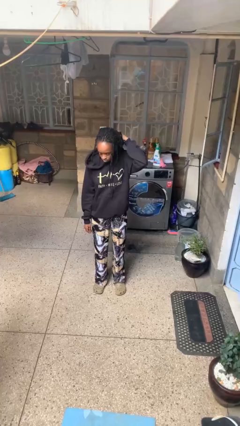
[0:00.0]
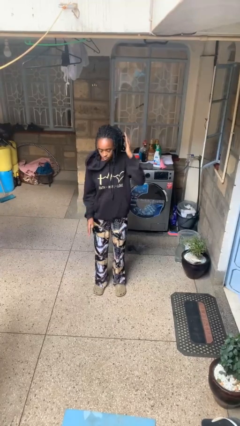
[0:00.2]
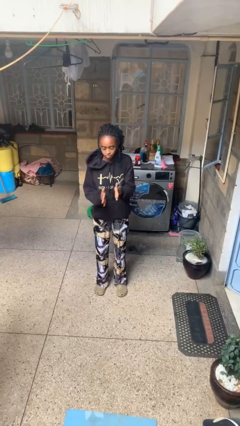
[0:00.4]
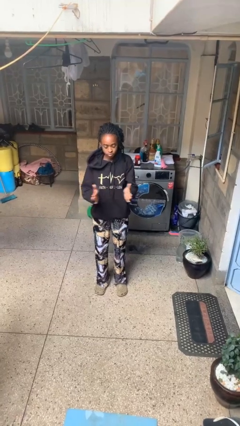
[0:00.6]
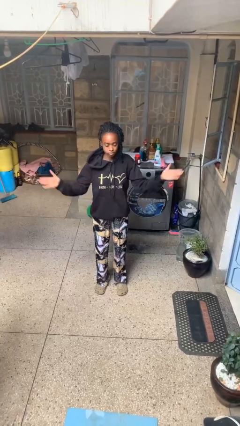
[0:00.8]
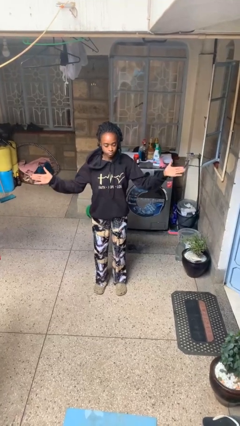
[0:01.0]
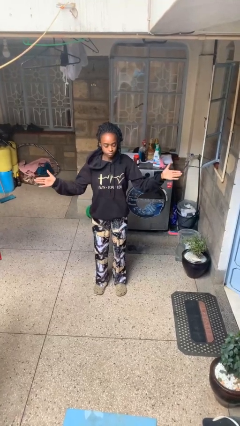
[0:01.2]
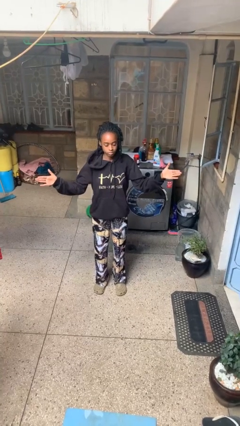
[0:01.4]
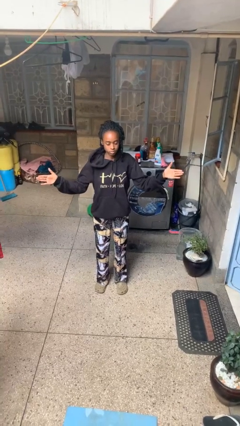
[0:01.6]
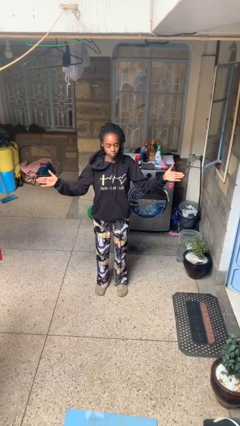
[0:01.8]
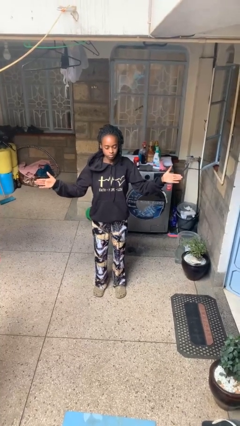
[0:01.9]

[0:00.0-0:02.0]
person gestures zoom in

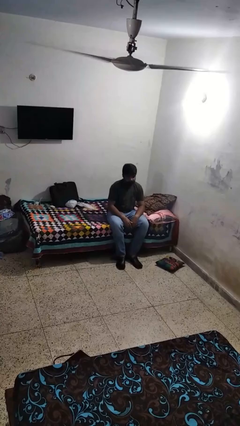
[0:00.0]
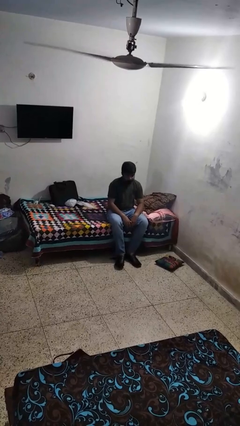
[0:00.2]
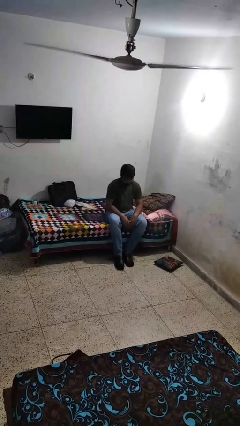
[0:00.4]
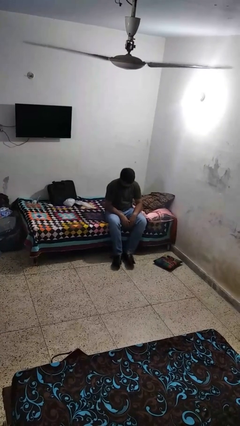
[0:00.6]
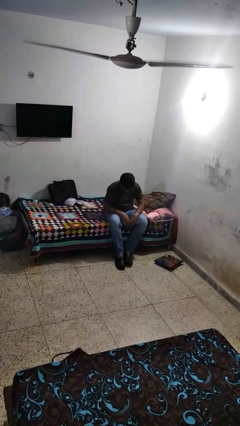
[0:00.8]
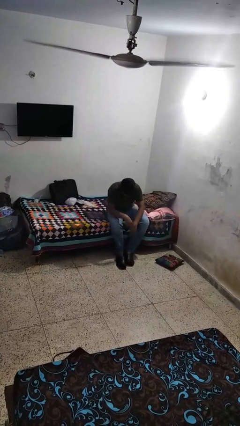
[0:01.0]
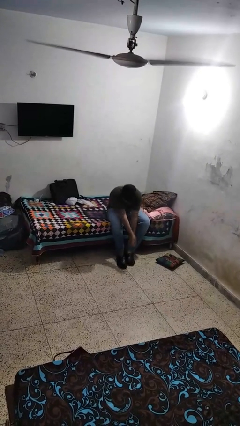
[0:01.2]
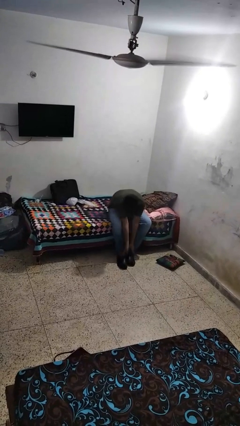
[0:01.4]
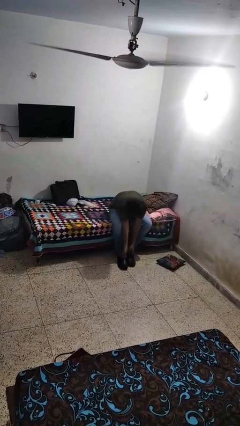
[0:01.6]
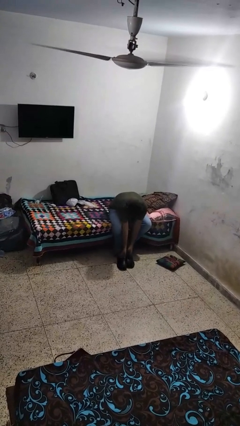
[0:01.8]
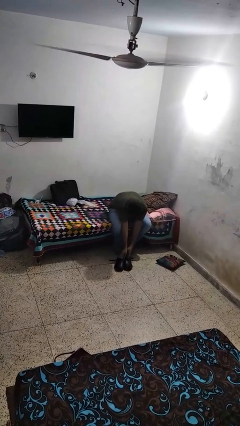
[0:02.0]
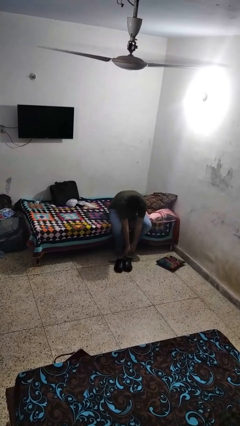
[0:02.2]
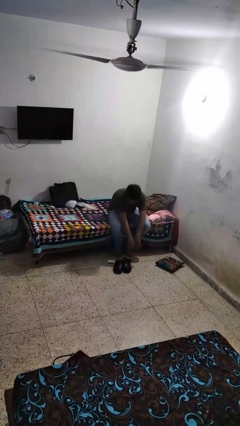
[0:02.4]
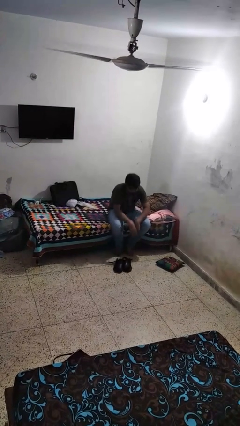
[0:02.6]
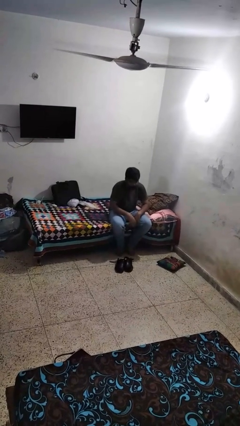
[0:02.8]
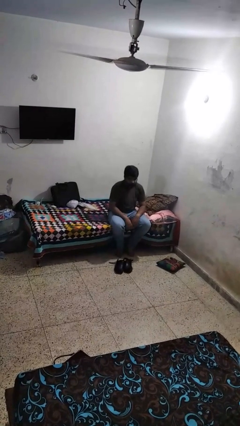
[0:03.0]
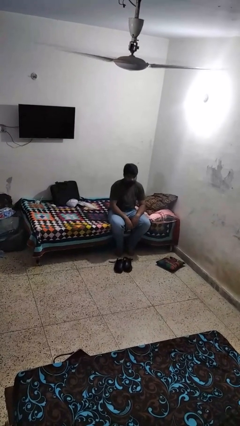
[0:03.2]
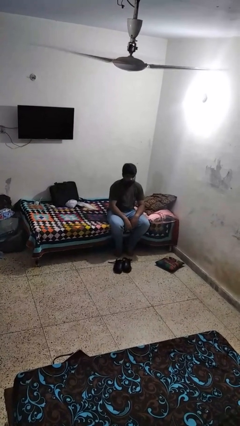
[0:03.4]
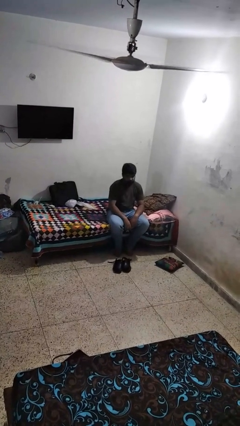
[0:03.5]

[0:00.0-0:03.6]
person takes off shoes

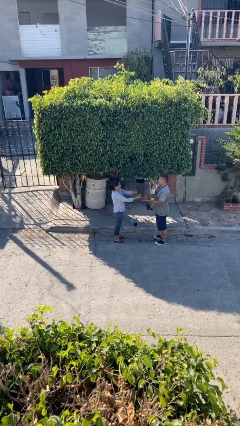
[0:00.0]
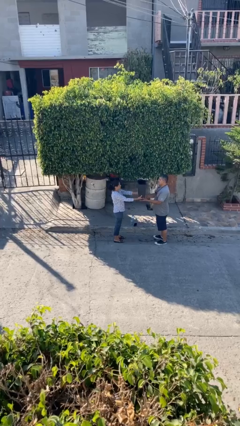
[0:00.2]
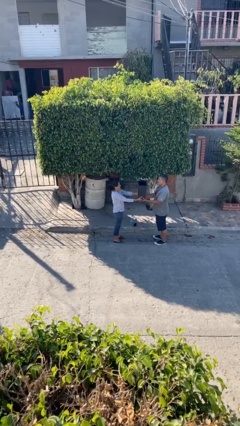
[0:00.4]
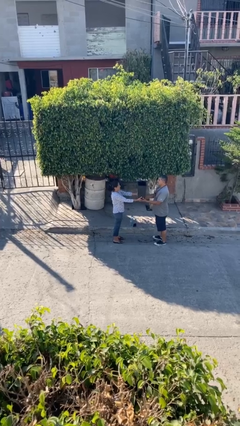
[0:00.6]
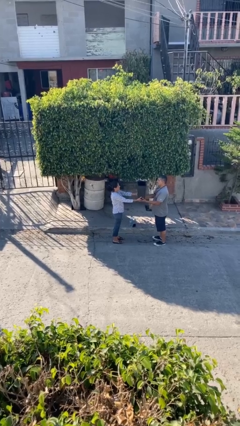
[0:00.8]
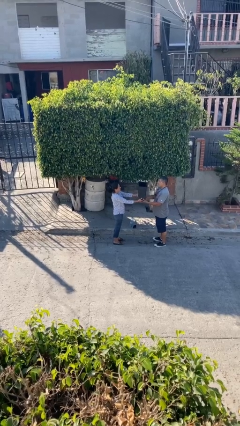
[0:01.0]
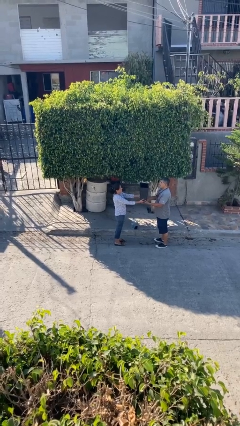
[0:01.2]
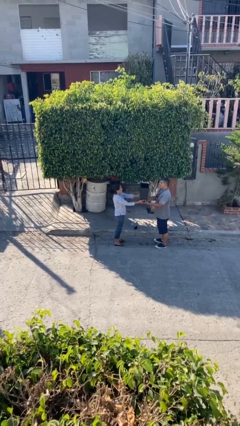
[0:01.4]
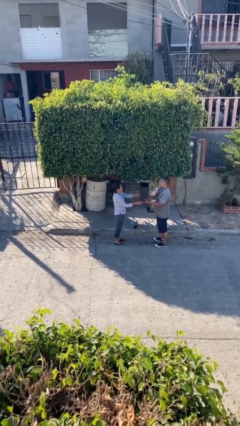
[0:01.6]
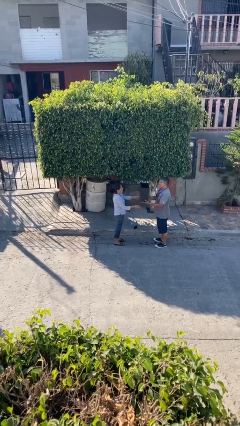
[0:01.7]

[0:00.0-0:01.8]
person transfers object to person

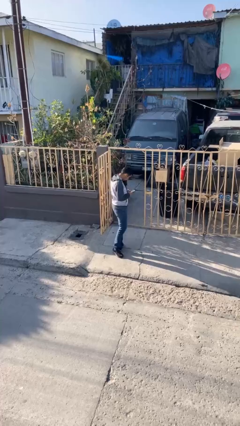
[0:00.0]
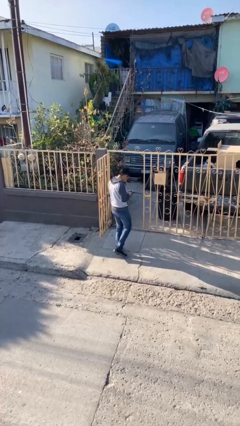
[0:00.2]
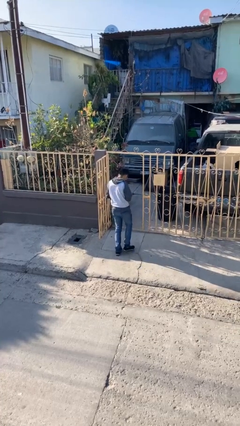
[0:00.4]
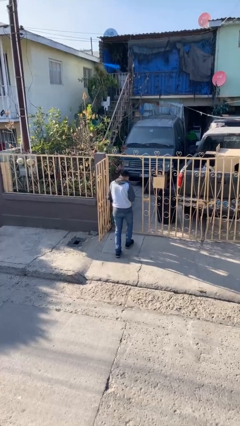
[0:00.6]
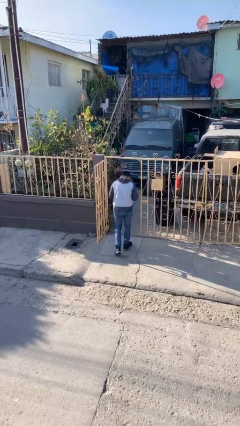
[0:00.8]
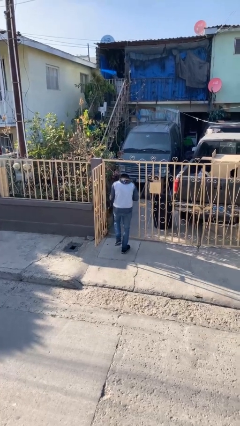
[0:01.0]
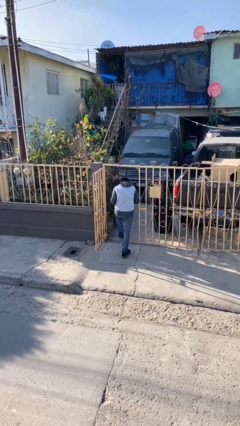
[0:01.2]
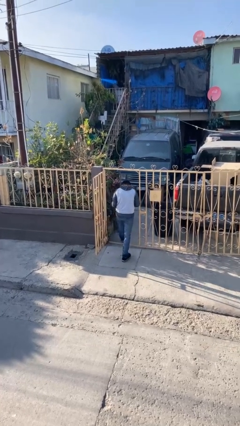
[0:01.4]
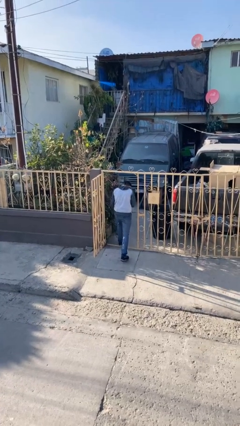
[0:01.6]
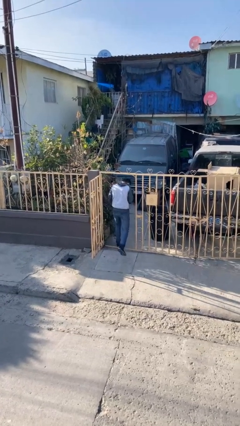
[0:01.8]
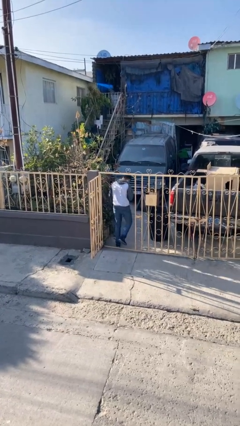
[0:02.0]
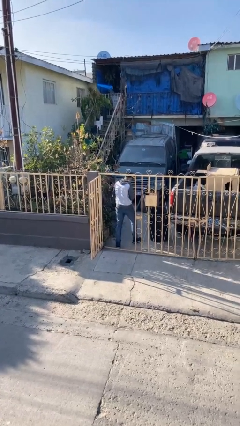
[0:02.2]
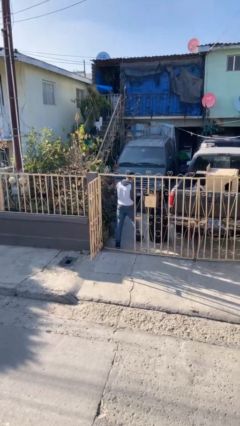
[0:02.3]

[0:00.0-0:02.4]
person exits scene through structure

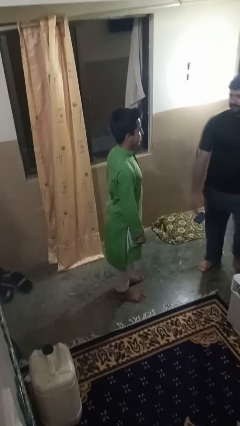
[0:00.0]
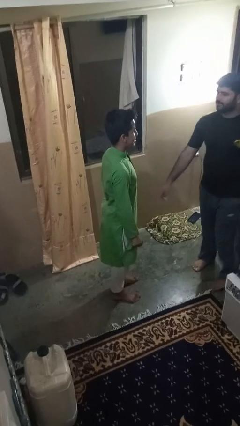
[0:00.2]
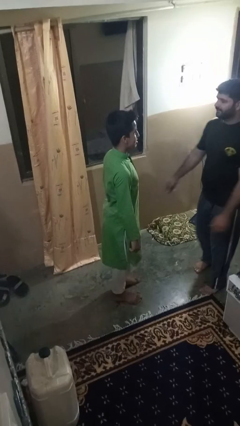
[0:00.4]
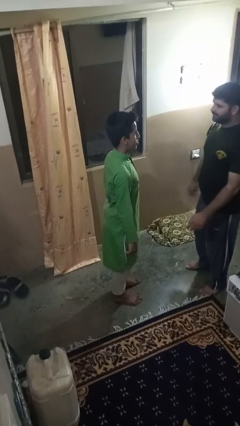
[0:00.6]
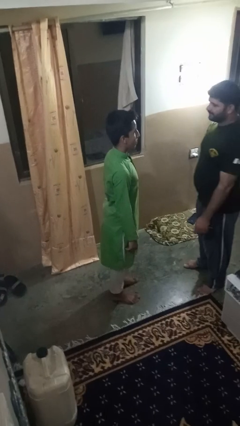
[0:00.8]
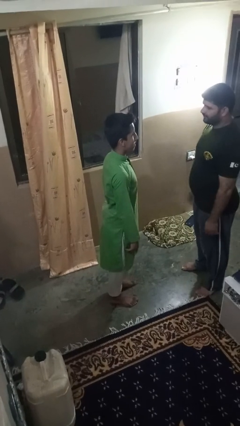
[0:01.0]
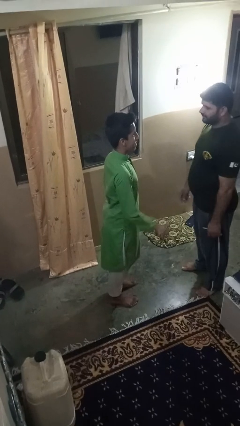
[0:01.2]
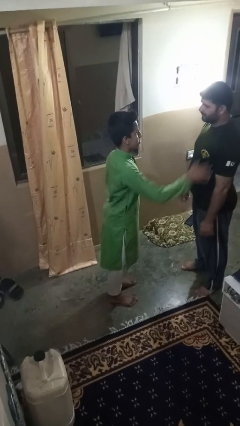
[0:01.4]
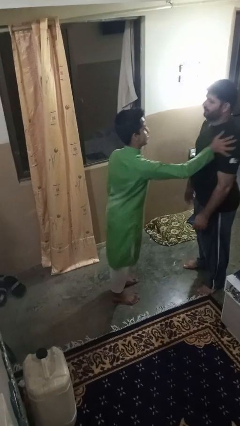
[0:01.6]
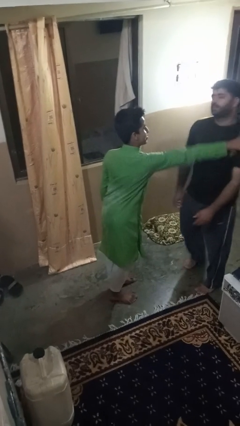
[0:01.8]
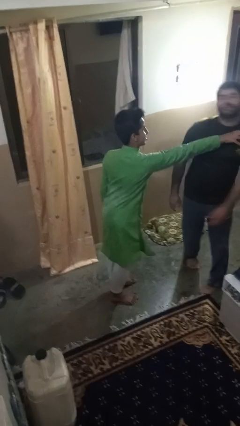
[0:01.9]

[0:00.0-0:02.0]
person shoves person

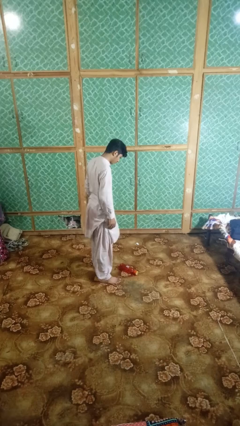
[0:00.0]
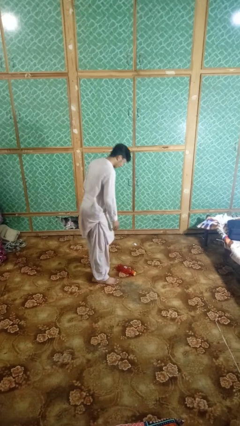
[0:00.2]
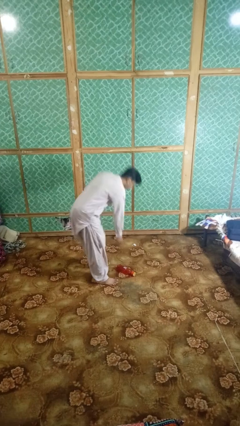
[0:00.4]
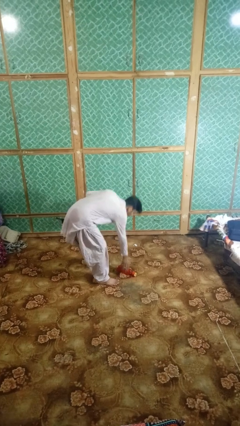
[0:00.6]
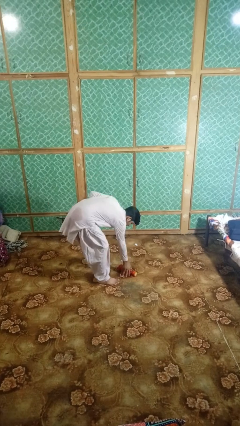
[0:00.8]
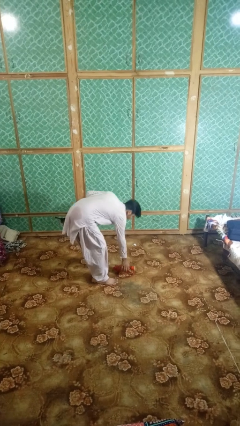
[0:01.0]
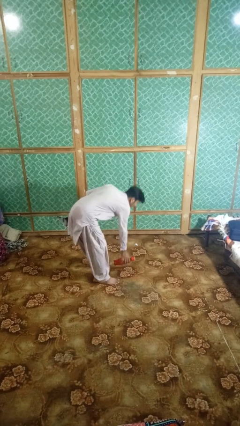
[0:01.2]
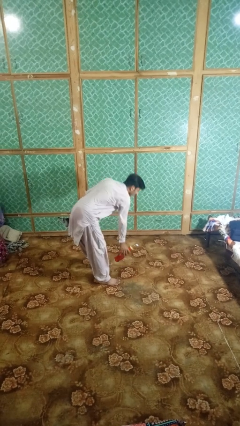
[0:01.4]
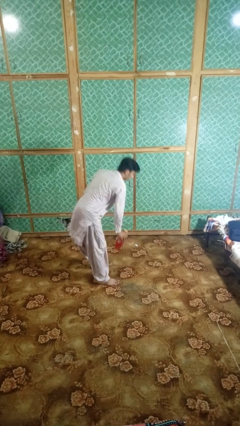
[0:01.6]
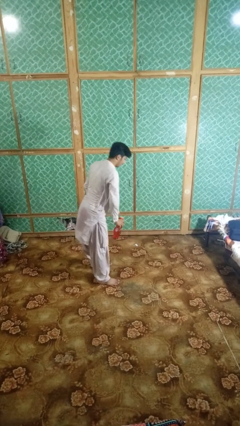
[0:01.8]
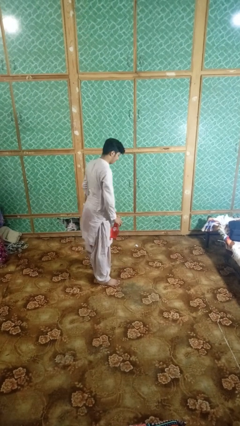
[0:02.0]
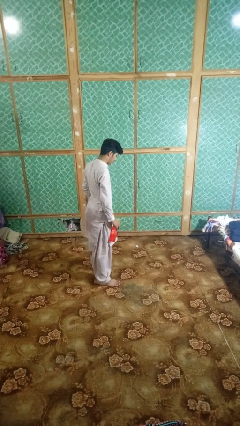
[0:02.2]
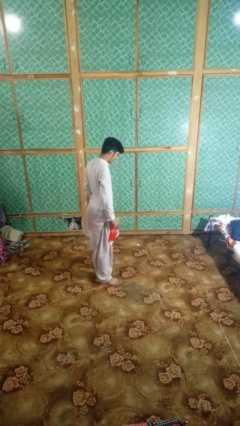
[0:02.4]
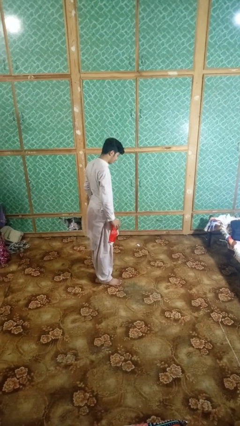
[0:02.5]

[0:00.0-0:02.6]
person picks up object from floor

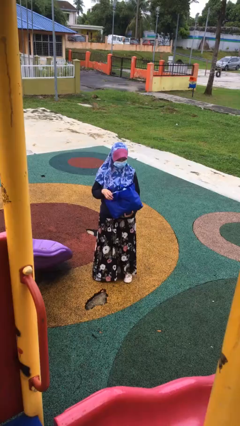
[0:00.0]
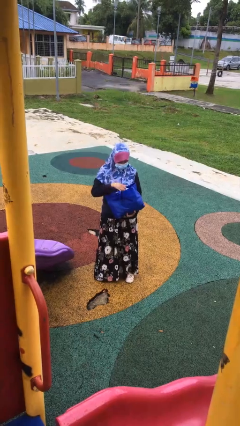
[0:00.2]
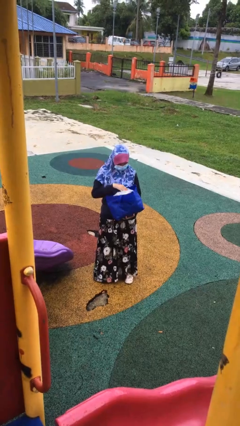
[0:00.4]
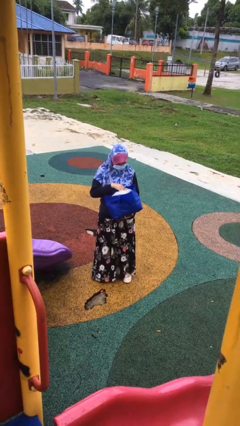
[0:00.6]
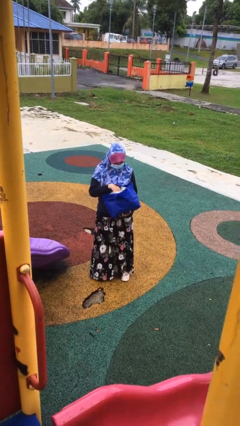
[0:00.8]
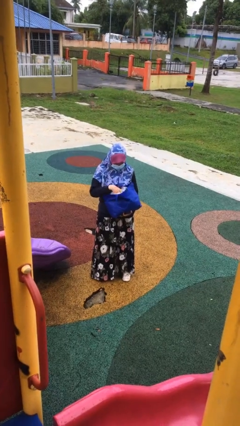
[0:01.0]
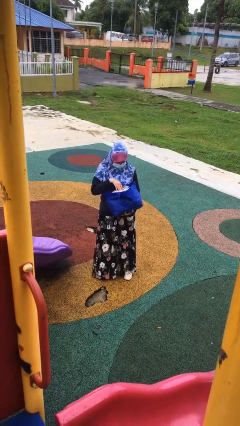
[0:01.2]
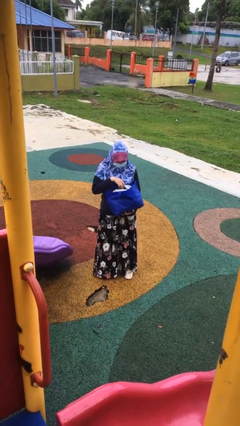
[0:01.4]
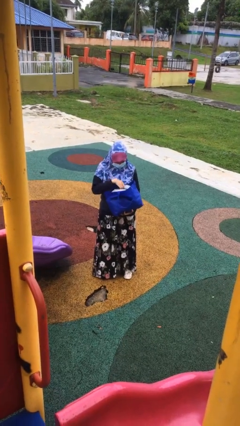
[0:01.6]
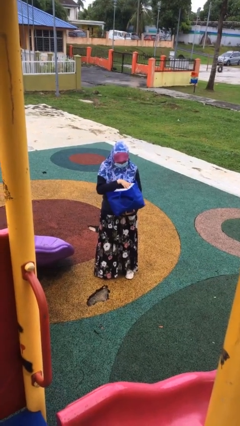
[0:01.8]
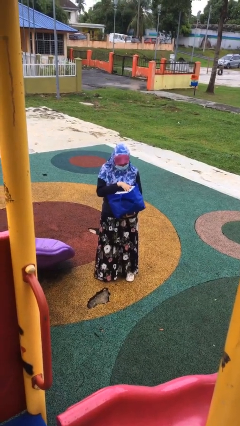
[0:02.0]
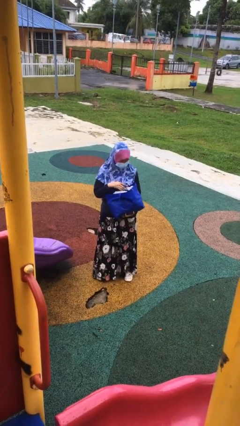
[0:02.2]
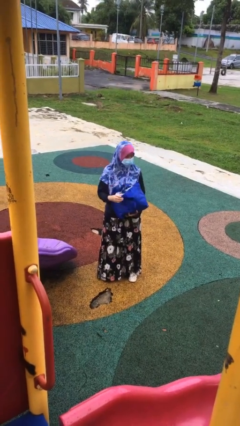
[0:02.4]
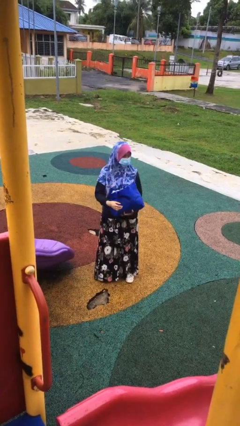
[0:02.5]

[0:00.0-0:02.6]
person searches in bag
